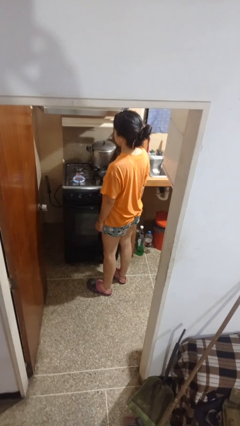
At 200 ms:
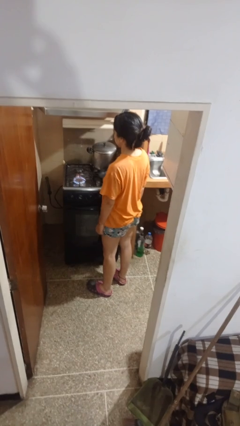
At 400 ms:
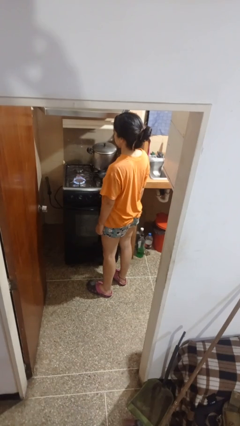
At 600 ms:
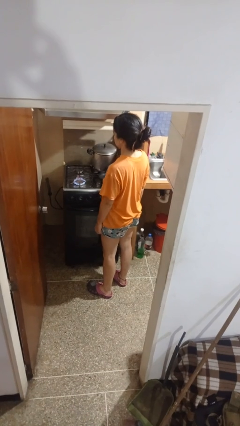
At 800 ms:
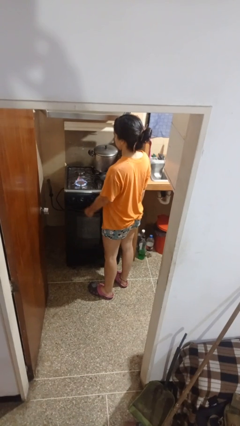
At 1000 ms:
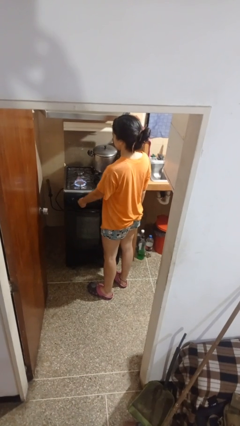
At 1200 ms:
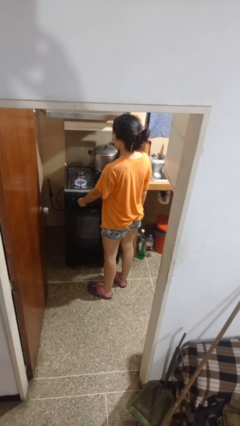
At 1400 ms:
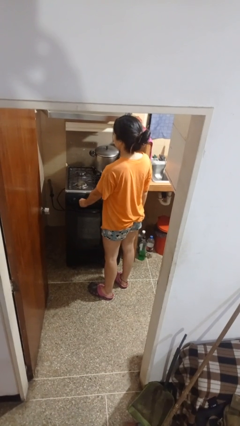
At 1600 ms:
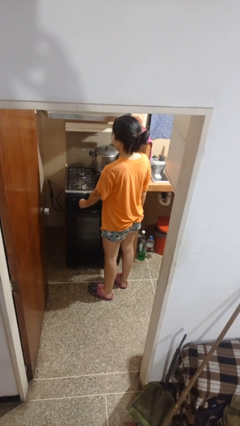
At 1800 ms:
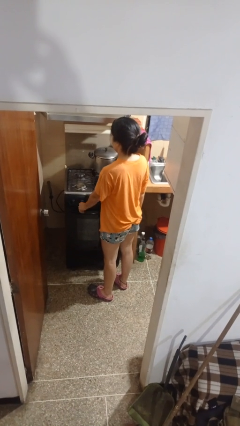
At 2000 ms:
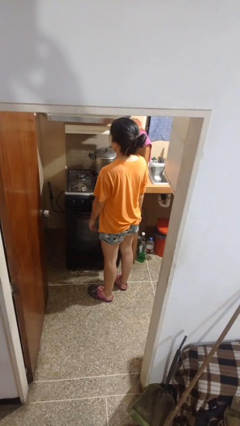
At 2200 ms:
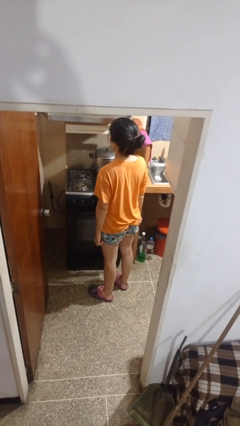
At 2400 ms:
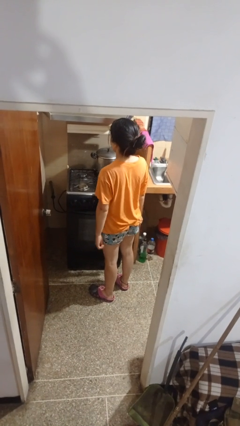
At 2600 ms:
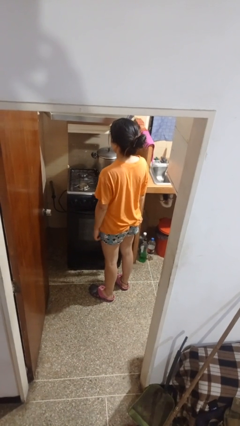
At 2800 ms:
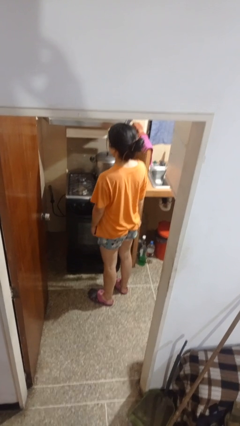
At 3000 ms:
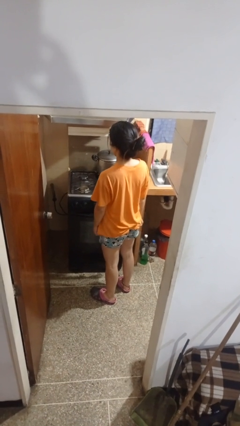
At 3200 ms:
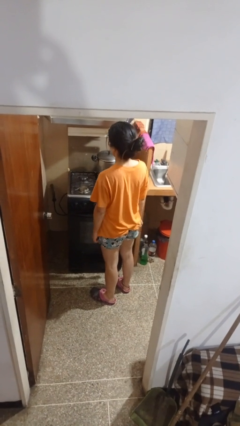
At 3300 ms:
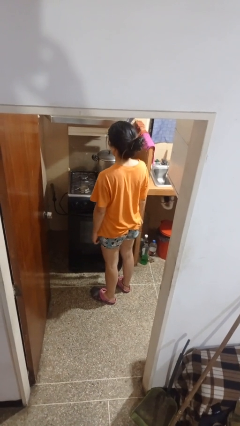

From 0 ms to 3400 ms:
person turns off stovetop

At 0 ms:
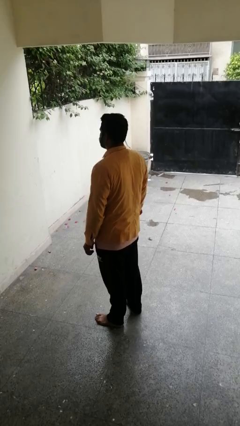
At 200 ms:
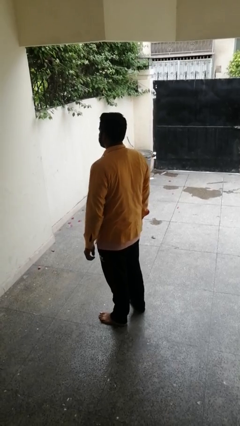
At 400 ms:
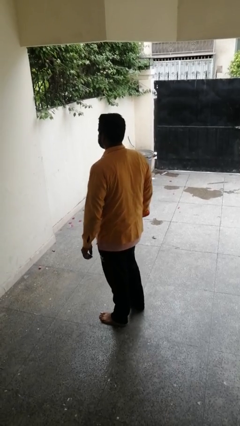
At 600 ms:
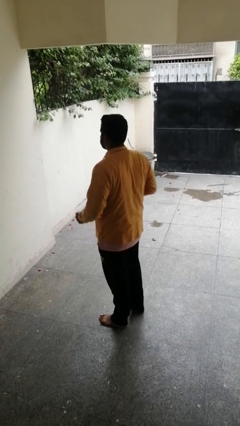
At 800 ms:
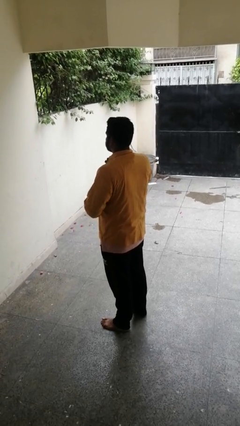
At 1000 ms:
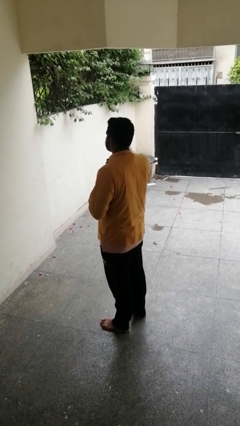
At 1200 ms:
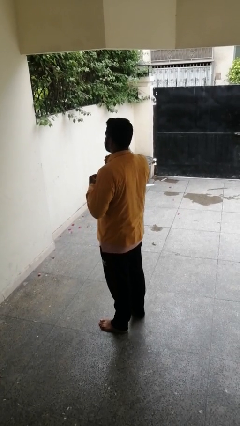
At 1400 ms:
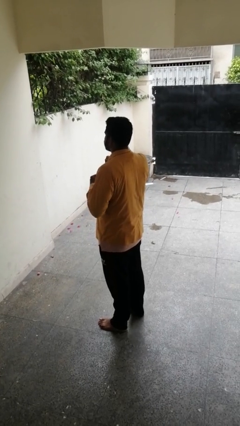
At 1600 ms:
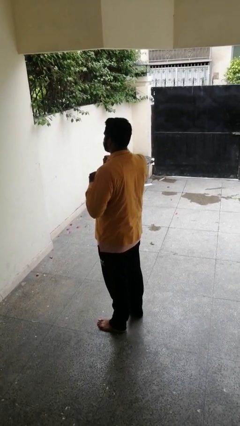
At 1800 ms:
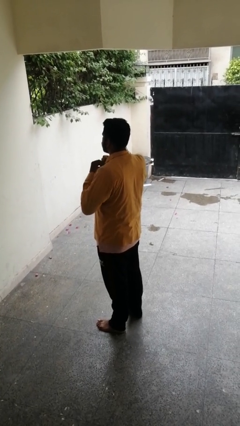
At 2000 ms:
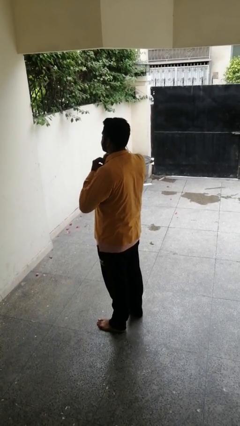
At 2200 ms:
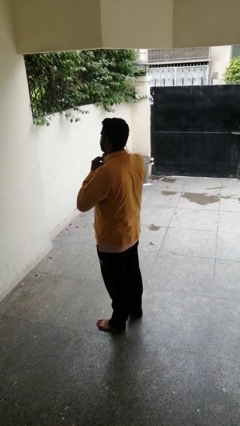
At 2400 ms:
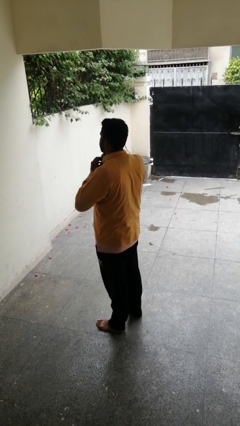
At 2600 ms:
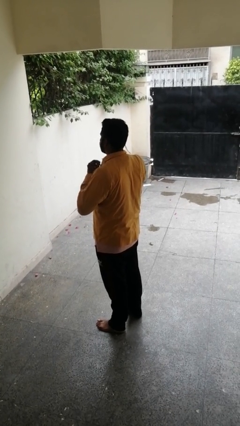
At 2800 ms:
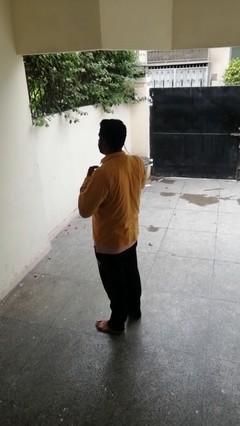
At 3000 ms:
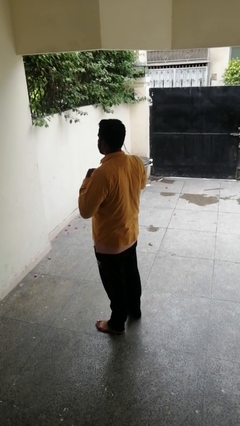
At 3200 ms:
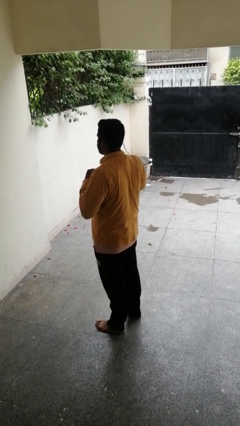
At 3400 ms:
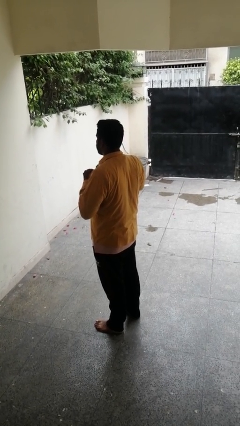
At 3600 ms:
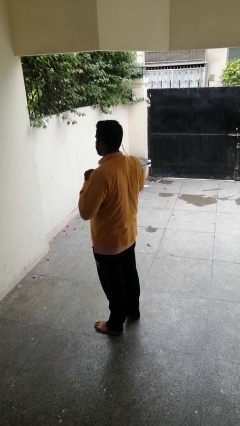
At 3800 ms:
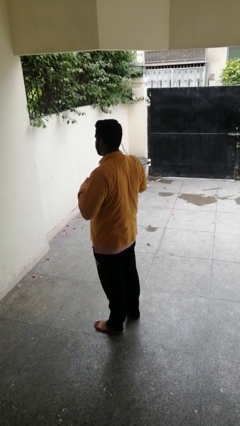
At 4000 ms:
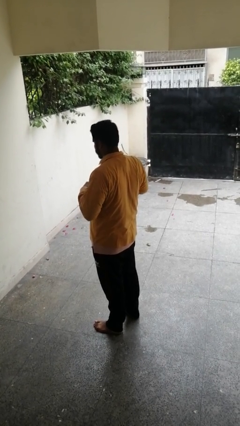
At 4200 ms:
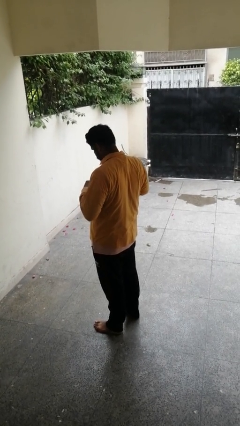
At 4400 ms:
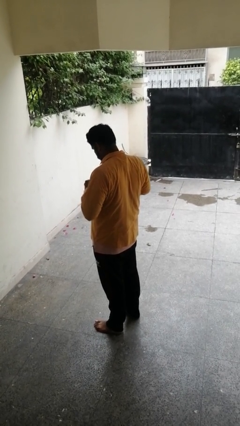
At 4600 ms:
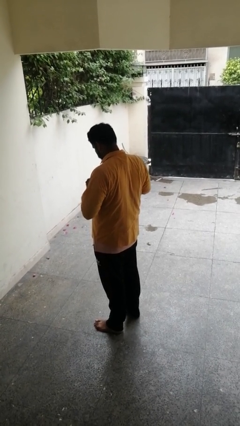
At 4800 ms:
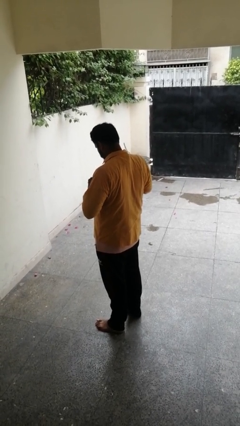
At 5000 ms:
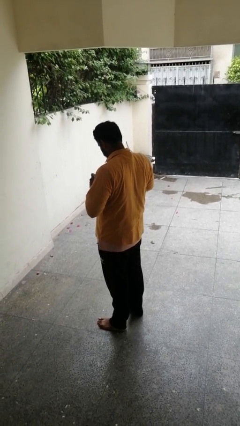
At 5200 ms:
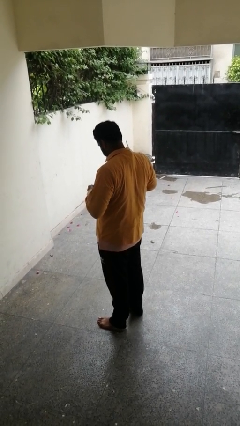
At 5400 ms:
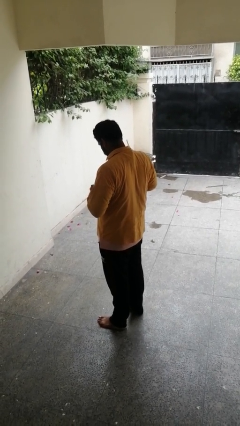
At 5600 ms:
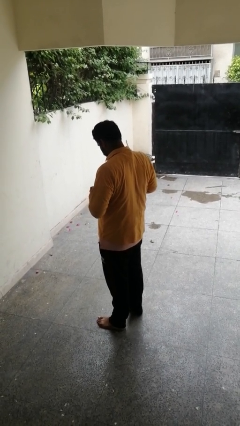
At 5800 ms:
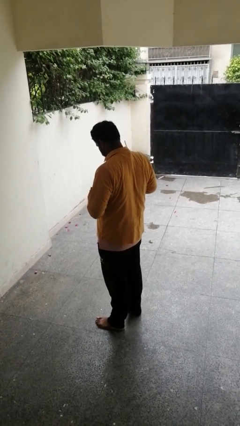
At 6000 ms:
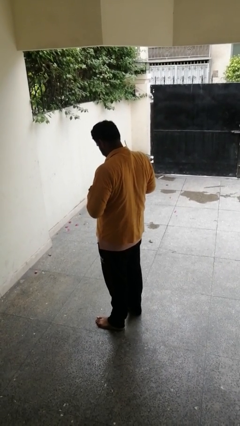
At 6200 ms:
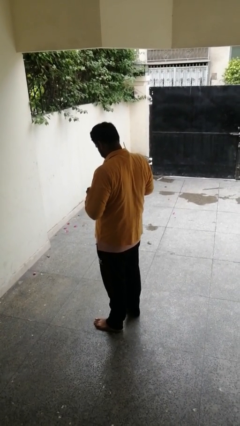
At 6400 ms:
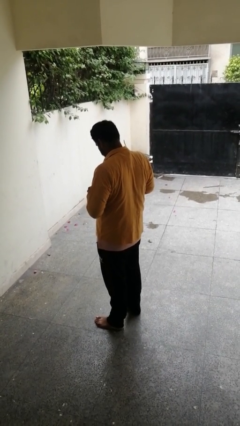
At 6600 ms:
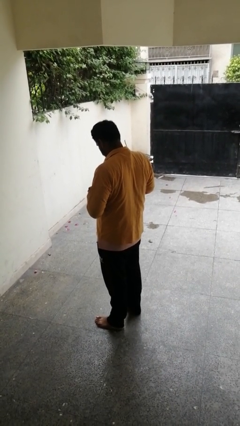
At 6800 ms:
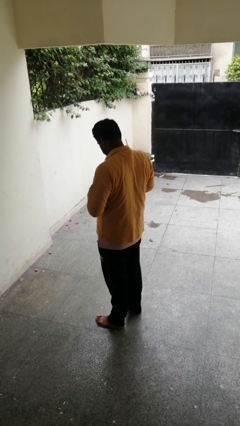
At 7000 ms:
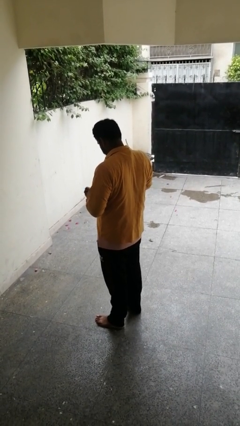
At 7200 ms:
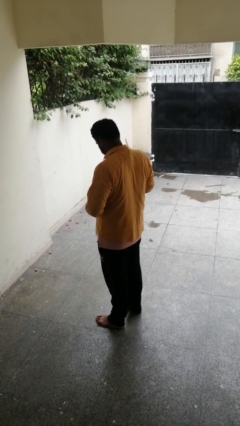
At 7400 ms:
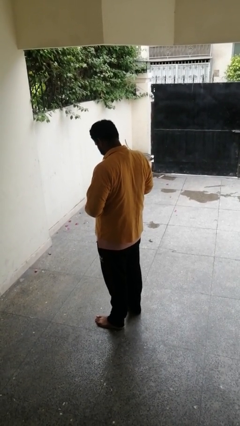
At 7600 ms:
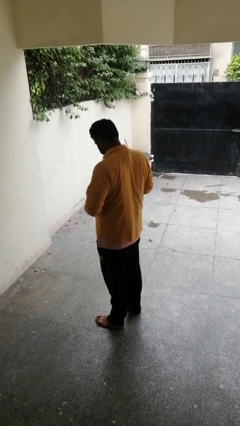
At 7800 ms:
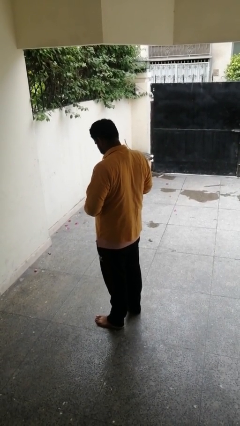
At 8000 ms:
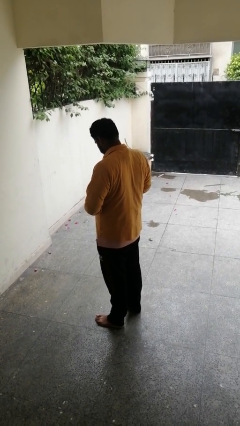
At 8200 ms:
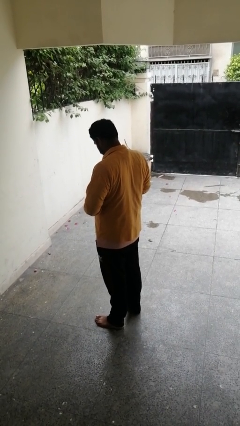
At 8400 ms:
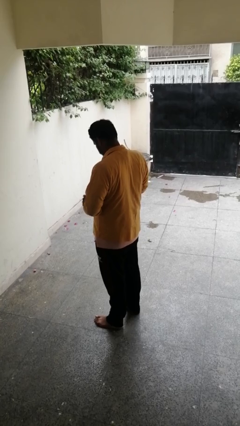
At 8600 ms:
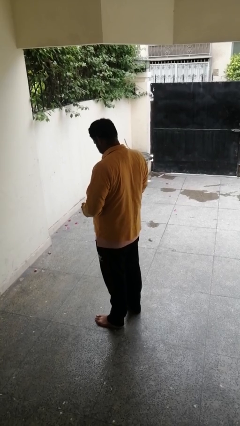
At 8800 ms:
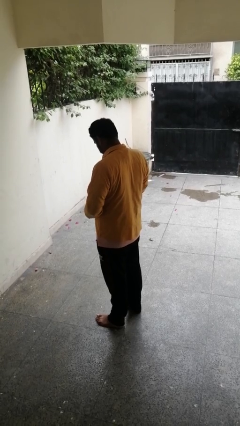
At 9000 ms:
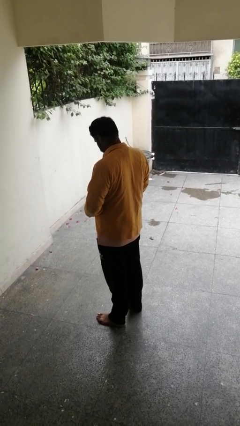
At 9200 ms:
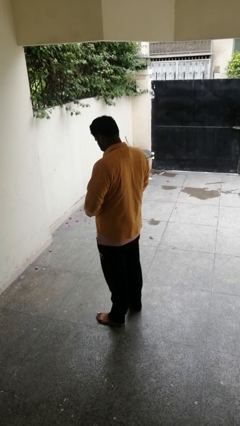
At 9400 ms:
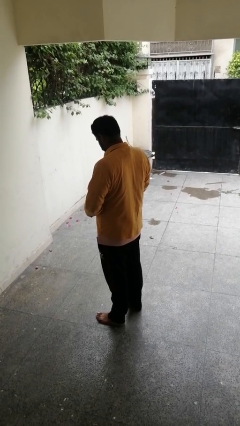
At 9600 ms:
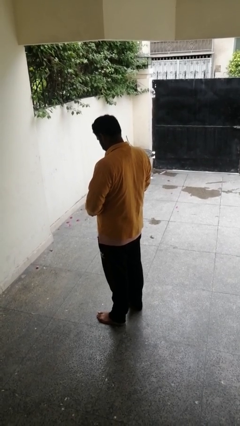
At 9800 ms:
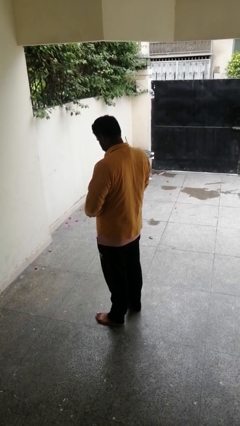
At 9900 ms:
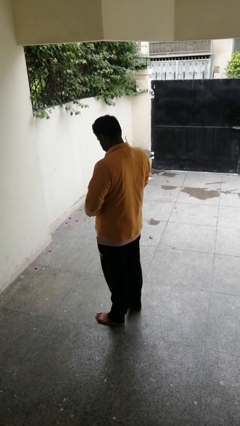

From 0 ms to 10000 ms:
person unbuttons shirt

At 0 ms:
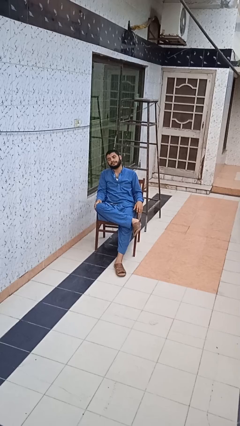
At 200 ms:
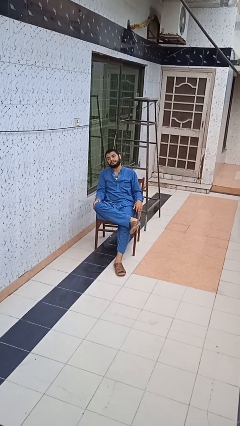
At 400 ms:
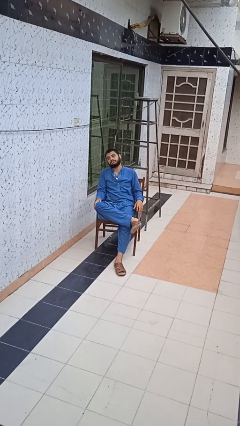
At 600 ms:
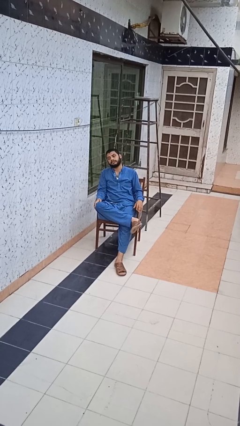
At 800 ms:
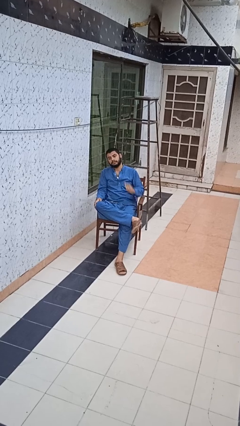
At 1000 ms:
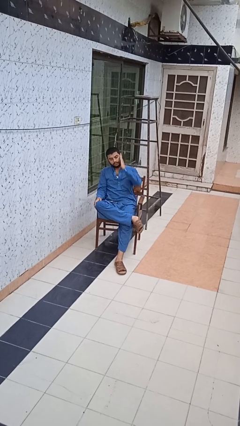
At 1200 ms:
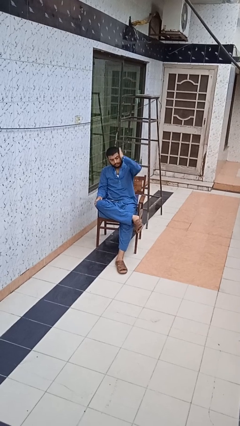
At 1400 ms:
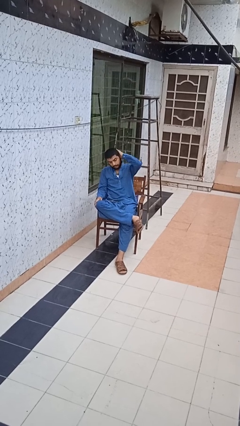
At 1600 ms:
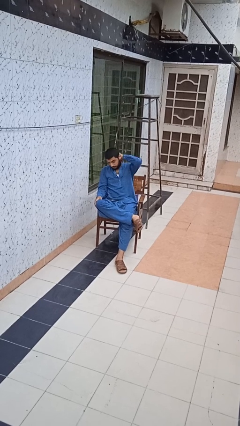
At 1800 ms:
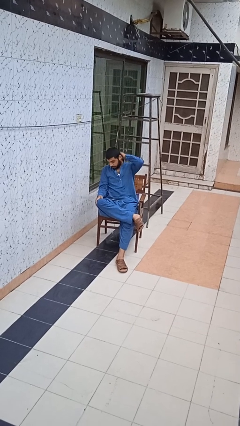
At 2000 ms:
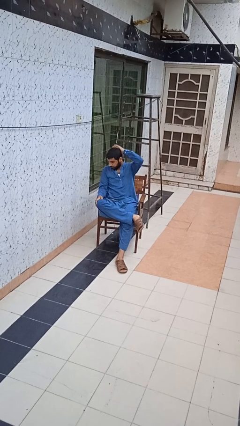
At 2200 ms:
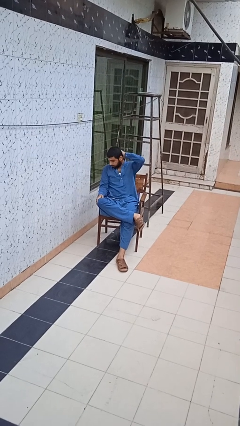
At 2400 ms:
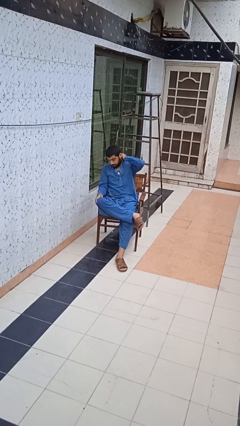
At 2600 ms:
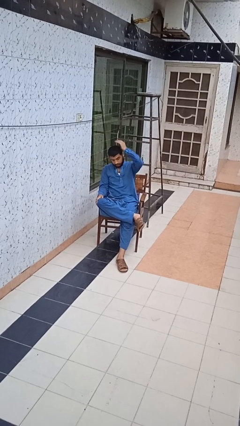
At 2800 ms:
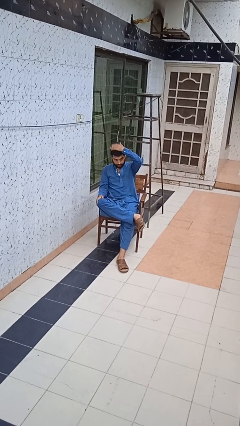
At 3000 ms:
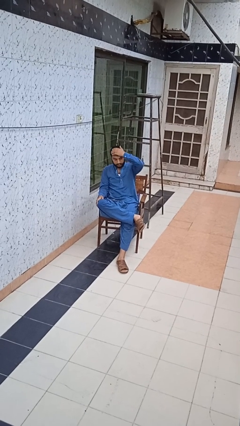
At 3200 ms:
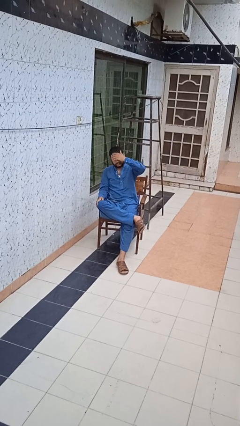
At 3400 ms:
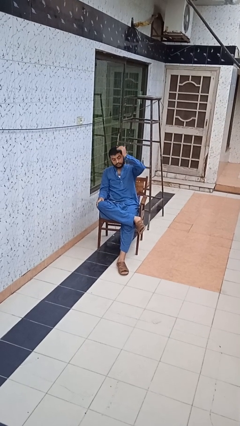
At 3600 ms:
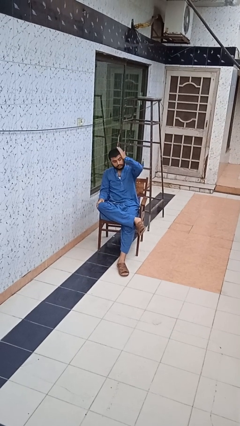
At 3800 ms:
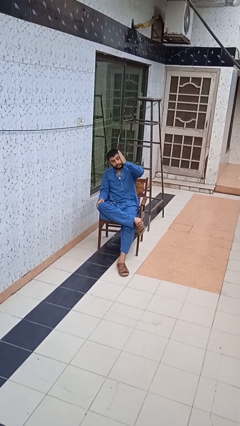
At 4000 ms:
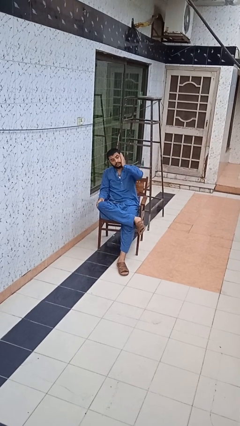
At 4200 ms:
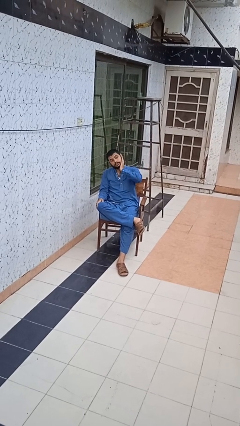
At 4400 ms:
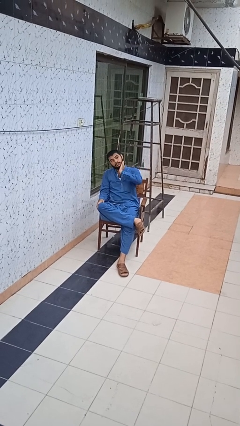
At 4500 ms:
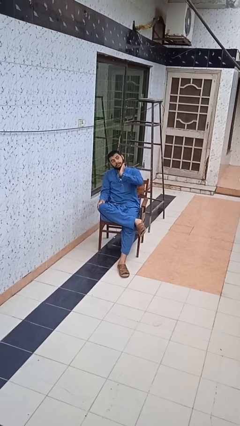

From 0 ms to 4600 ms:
person strokes hair
